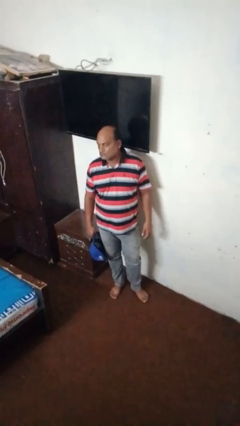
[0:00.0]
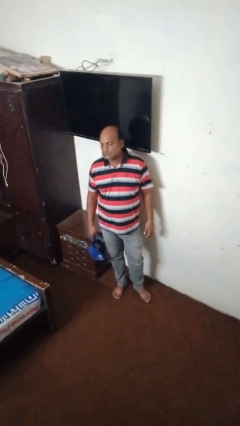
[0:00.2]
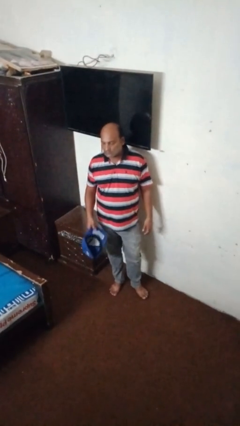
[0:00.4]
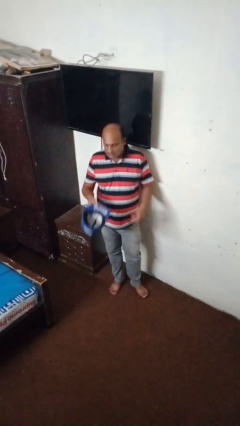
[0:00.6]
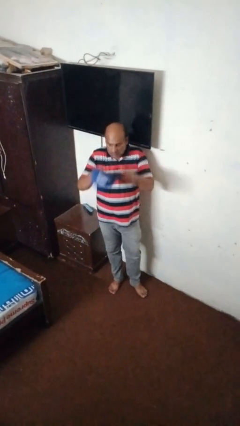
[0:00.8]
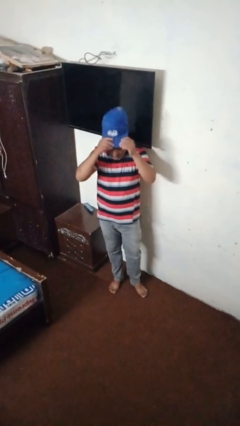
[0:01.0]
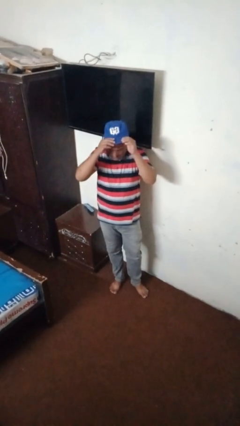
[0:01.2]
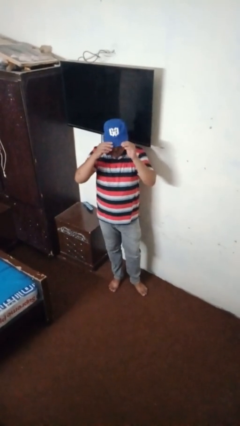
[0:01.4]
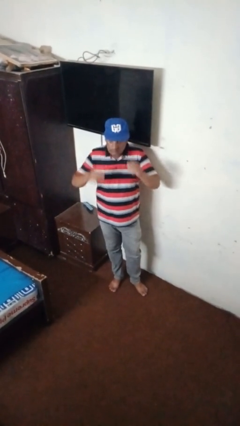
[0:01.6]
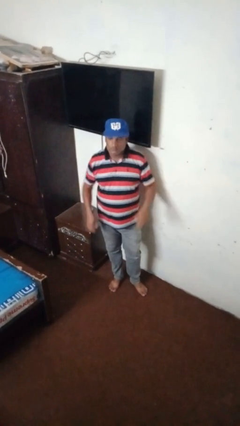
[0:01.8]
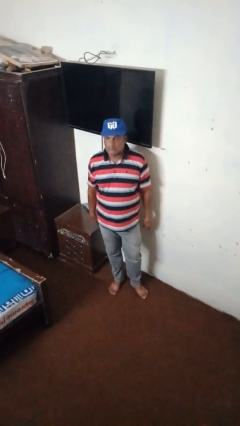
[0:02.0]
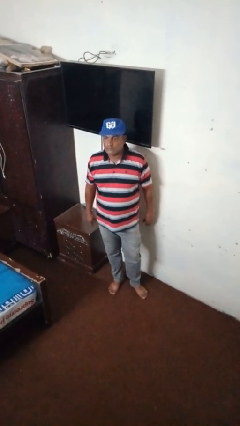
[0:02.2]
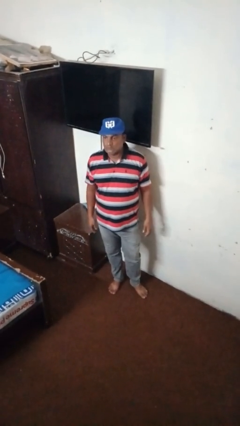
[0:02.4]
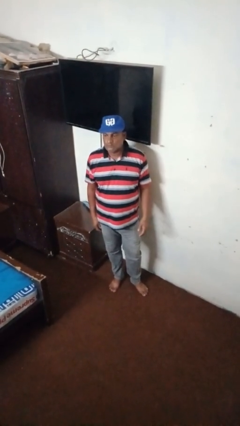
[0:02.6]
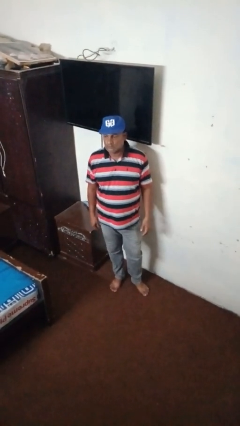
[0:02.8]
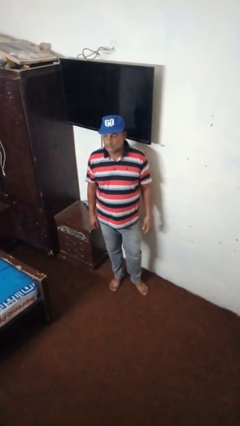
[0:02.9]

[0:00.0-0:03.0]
person puts on hat

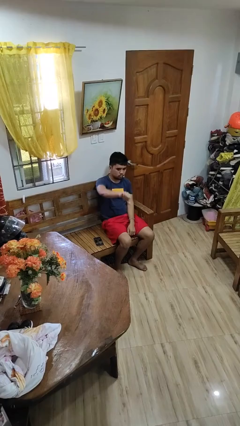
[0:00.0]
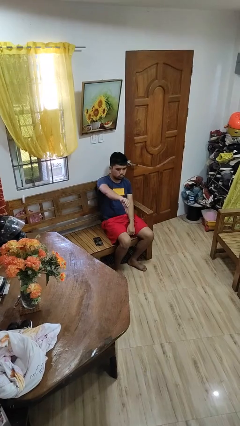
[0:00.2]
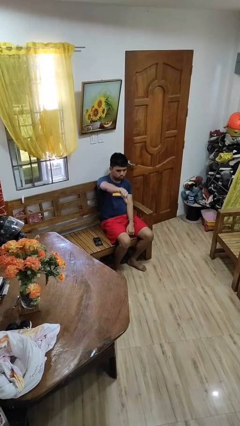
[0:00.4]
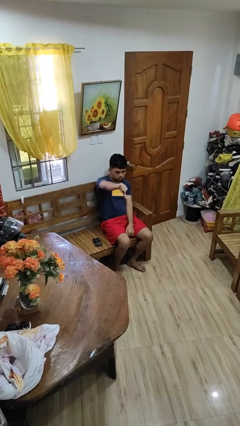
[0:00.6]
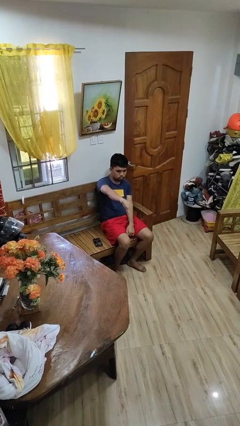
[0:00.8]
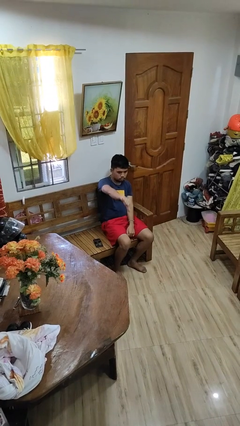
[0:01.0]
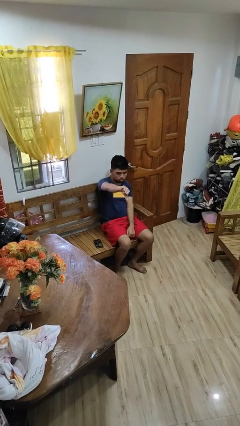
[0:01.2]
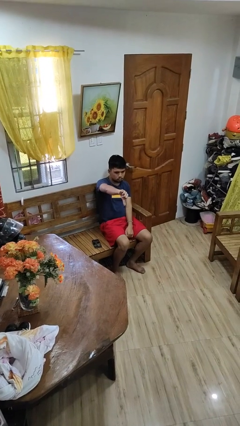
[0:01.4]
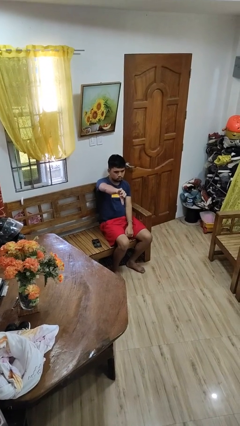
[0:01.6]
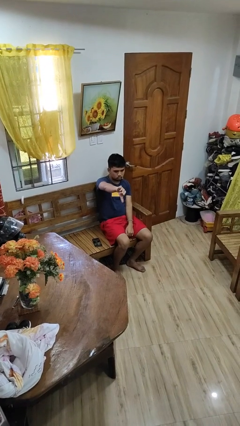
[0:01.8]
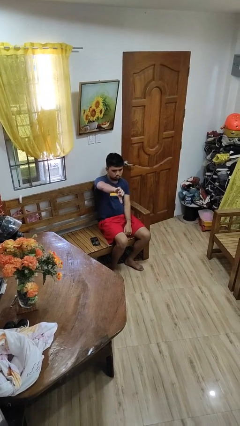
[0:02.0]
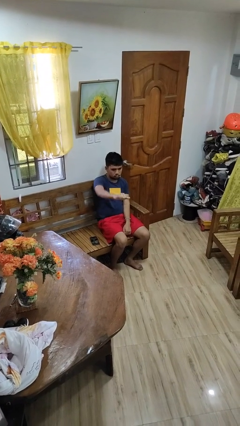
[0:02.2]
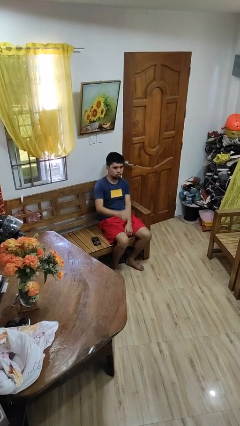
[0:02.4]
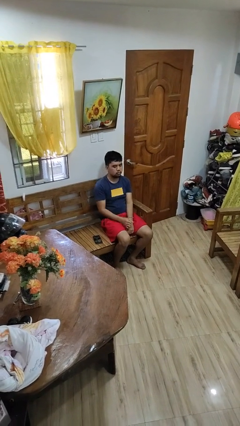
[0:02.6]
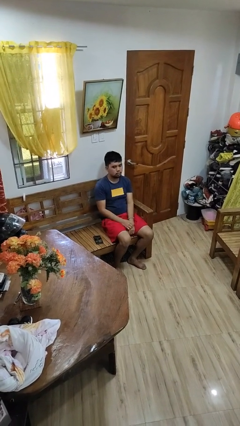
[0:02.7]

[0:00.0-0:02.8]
person gestures thumbs down

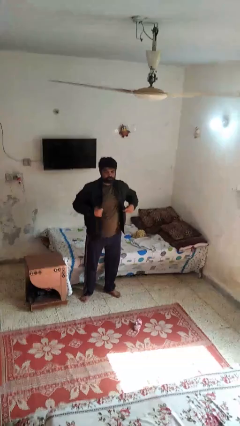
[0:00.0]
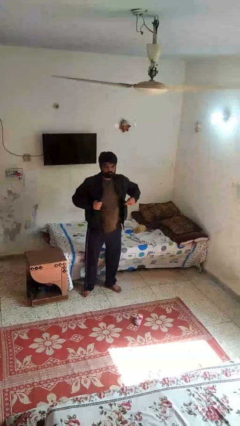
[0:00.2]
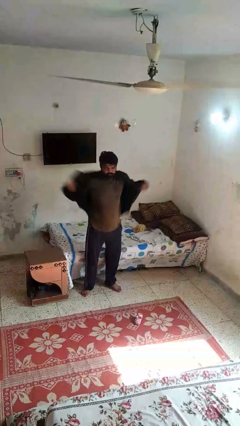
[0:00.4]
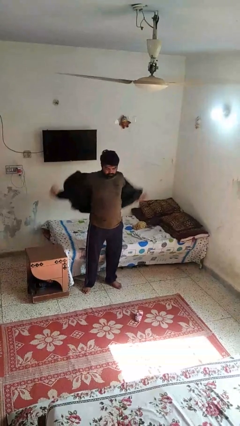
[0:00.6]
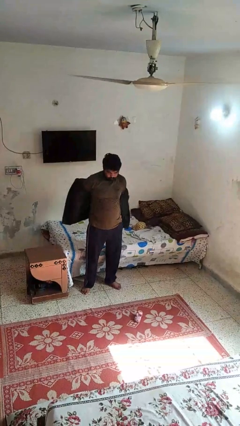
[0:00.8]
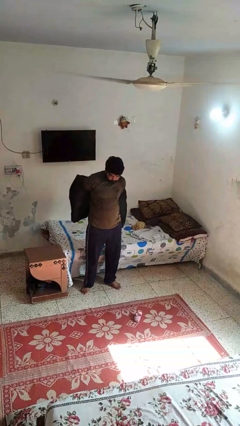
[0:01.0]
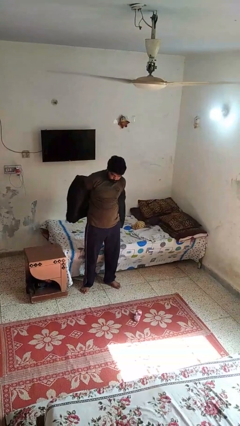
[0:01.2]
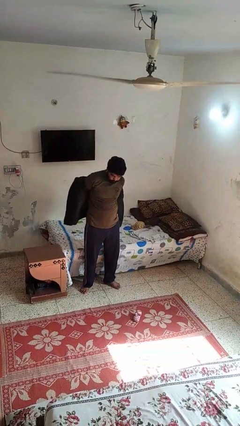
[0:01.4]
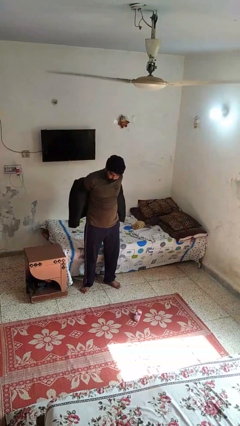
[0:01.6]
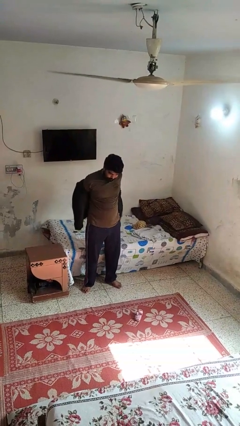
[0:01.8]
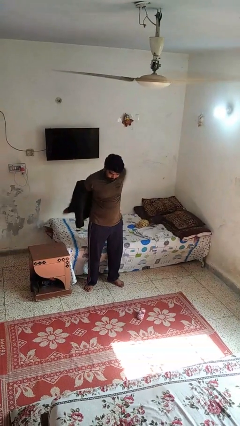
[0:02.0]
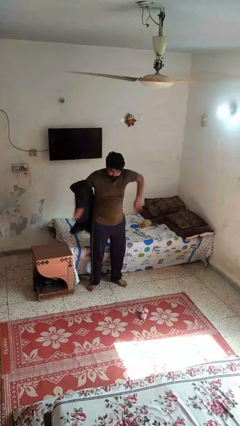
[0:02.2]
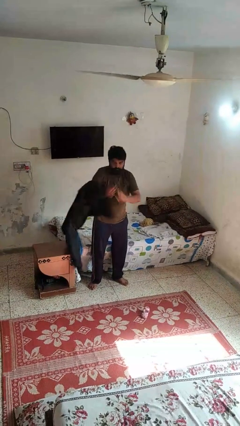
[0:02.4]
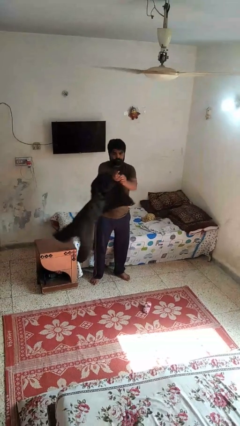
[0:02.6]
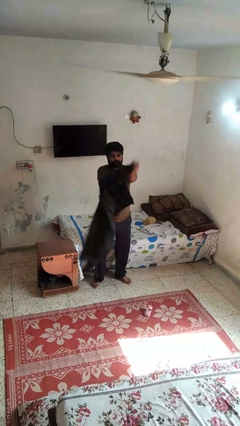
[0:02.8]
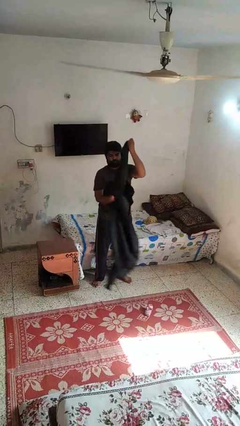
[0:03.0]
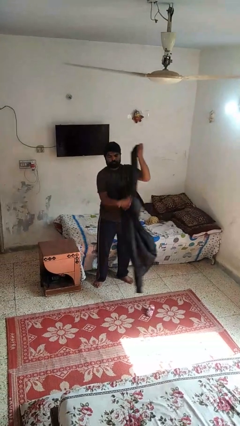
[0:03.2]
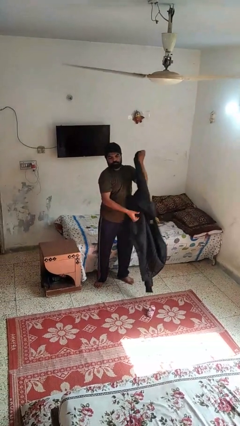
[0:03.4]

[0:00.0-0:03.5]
person takes off jacket

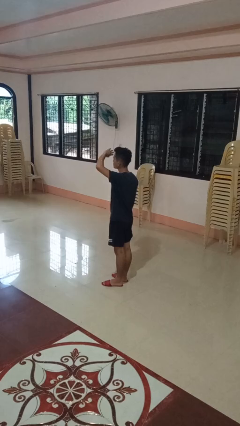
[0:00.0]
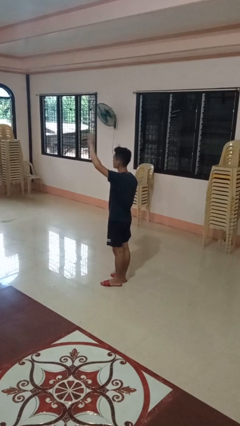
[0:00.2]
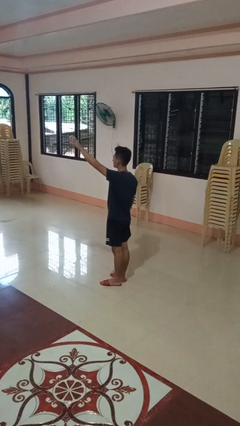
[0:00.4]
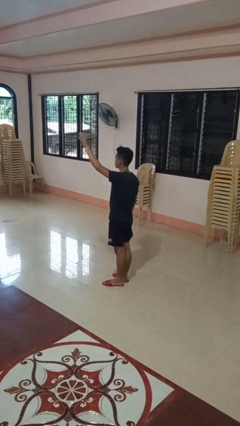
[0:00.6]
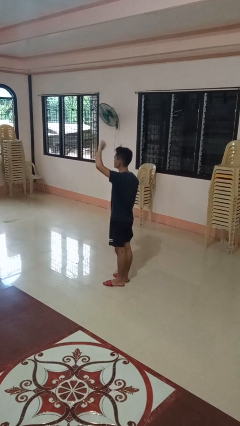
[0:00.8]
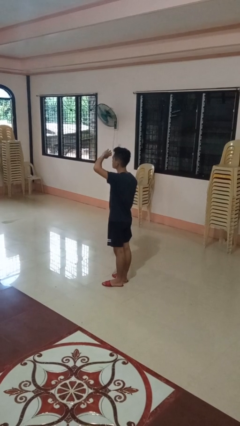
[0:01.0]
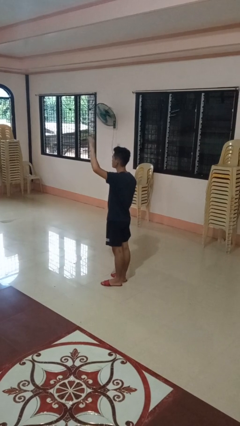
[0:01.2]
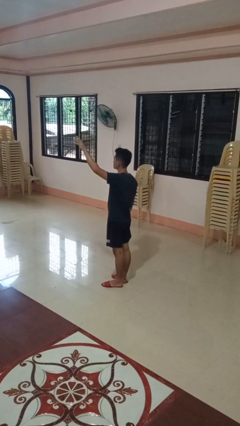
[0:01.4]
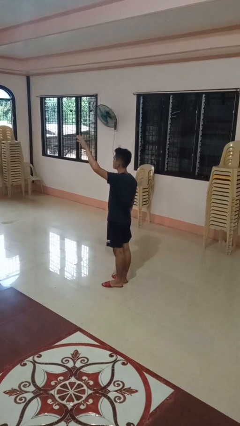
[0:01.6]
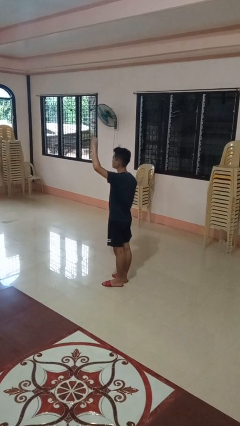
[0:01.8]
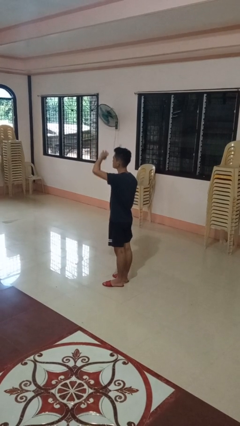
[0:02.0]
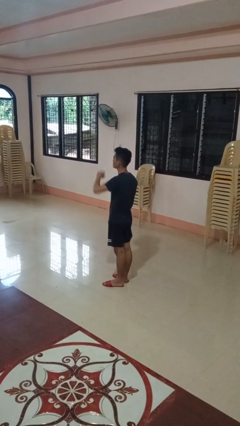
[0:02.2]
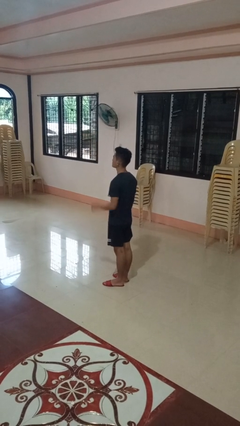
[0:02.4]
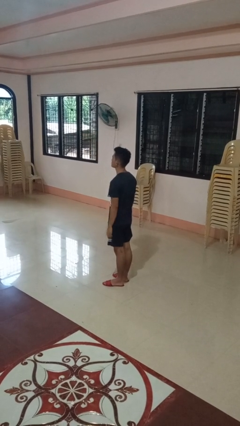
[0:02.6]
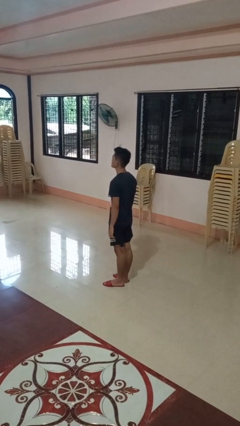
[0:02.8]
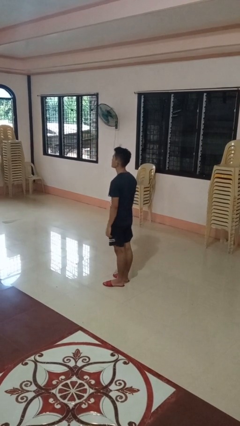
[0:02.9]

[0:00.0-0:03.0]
person waves at person

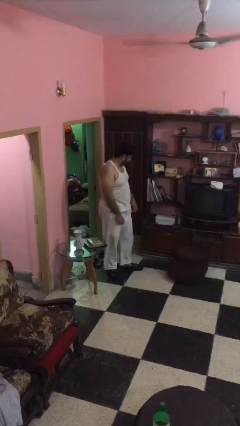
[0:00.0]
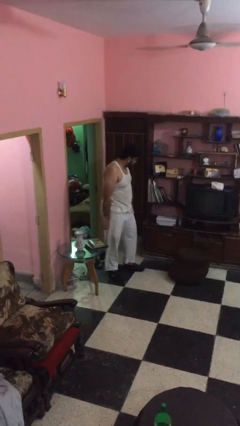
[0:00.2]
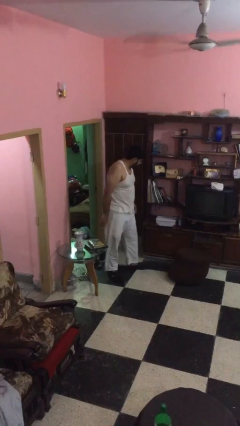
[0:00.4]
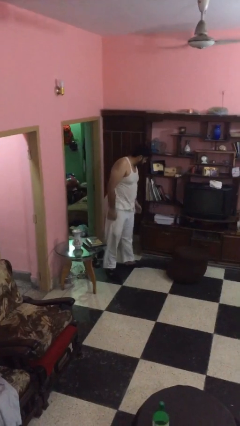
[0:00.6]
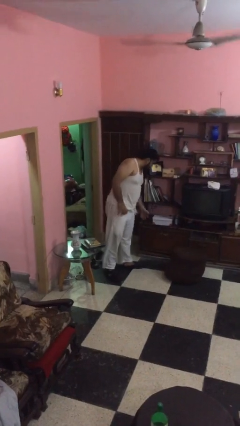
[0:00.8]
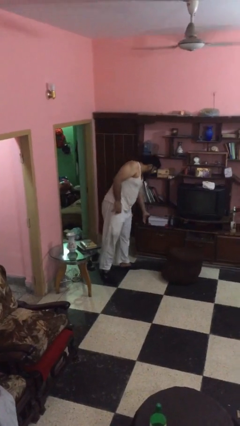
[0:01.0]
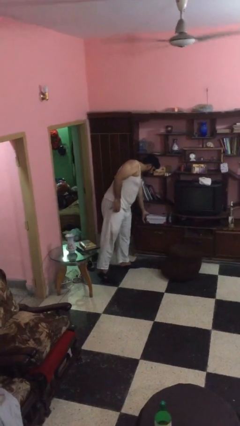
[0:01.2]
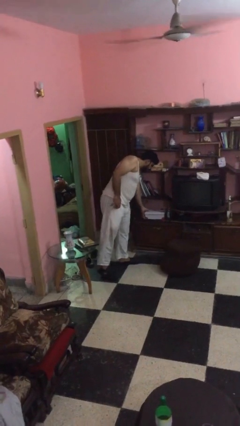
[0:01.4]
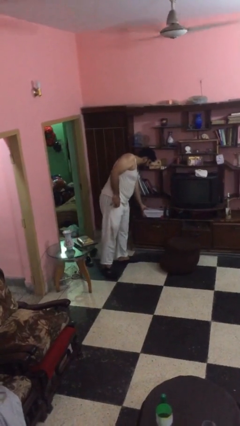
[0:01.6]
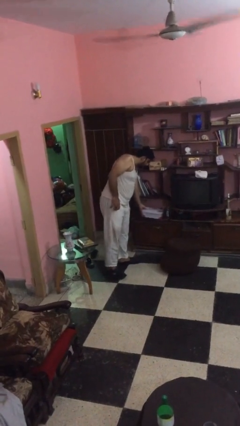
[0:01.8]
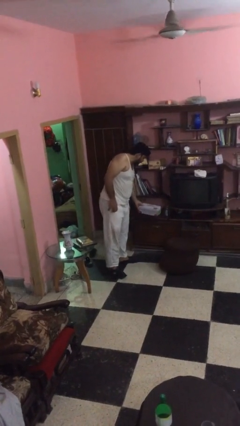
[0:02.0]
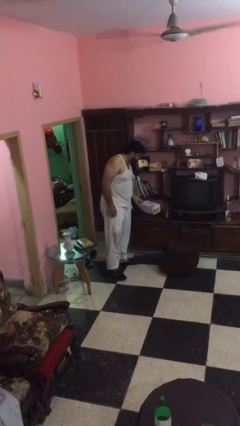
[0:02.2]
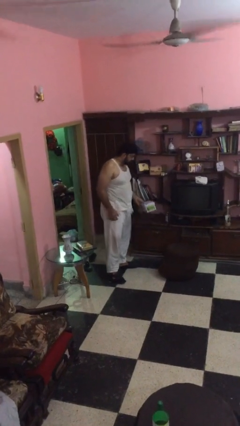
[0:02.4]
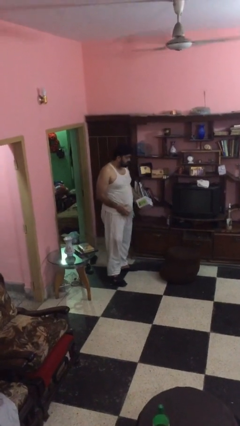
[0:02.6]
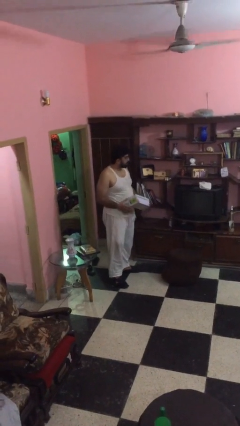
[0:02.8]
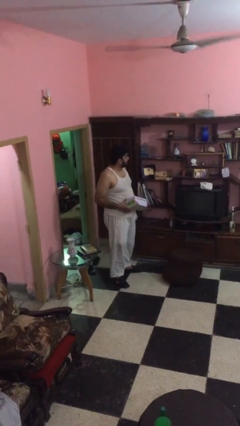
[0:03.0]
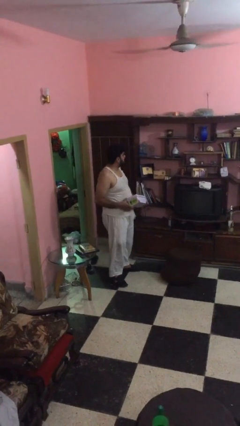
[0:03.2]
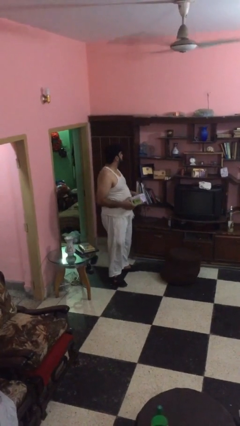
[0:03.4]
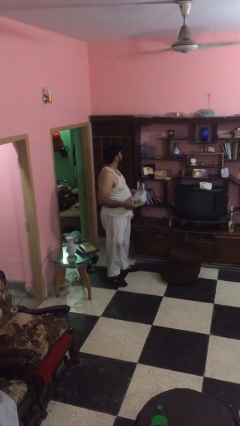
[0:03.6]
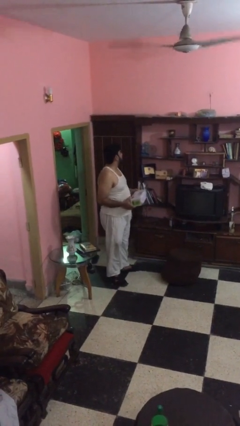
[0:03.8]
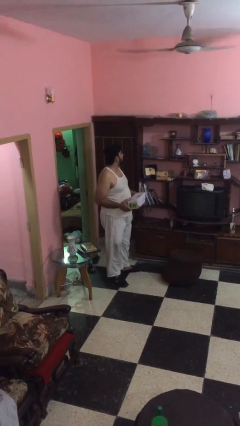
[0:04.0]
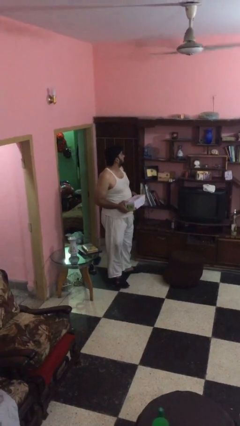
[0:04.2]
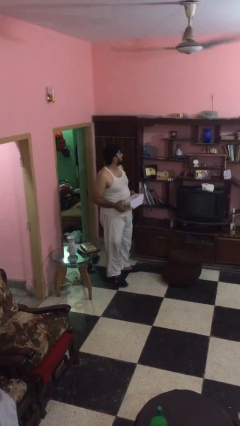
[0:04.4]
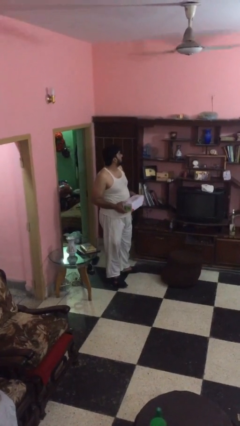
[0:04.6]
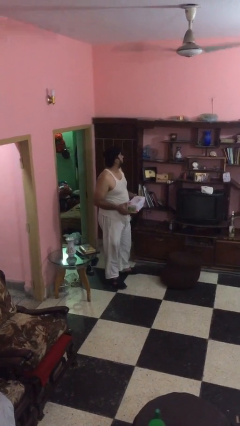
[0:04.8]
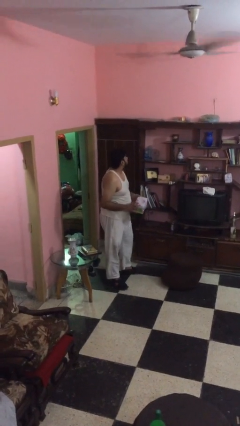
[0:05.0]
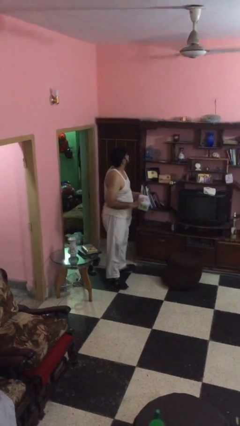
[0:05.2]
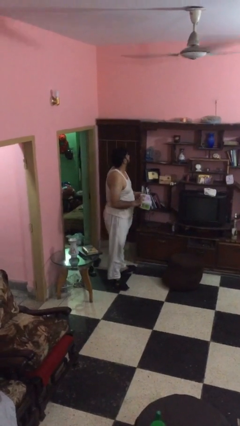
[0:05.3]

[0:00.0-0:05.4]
person picks up object from table
